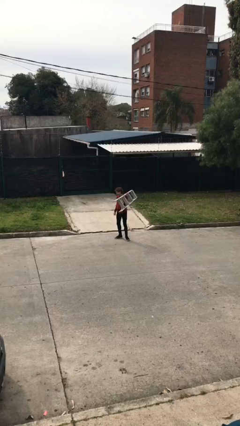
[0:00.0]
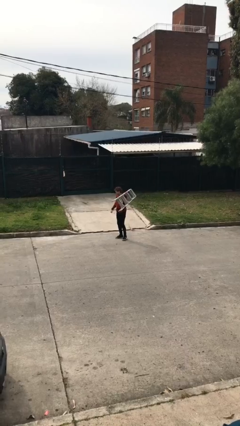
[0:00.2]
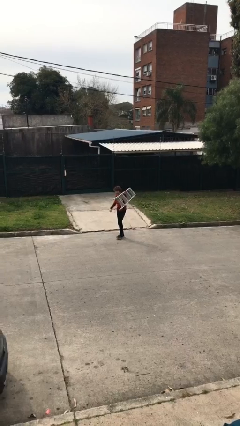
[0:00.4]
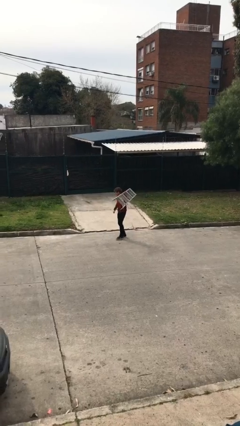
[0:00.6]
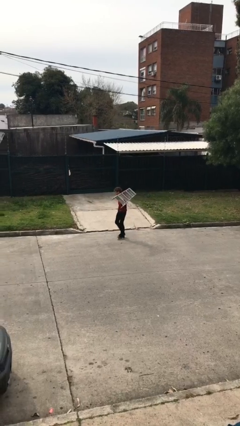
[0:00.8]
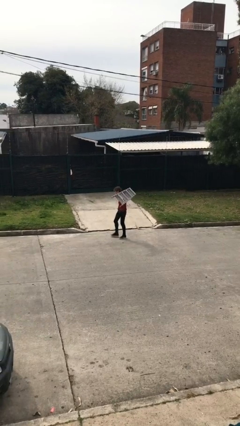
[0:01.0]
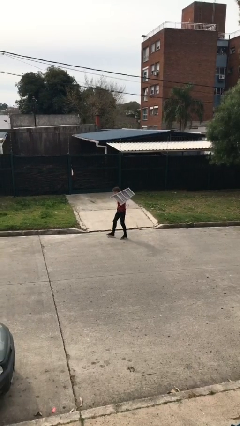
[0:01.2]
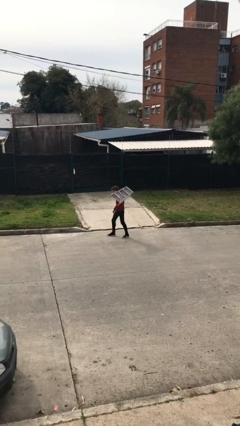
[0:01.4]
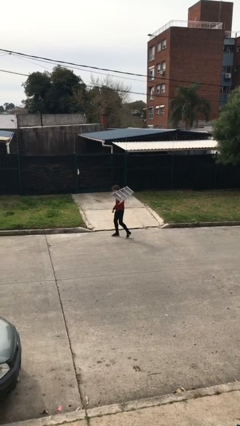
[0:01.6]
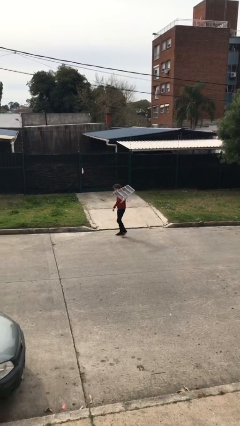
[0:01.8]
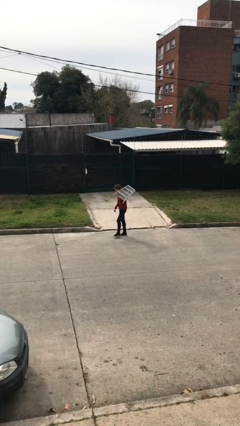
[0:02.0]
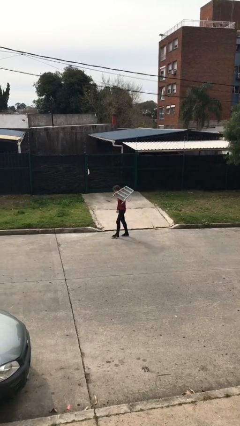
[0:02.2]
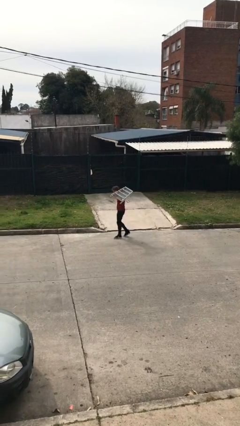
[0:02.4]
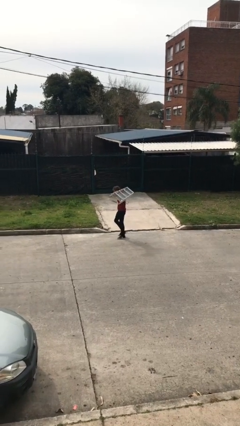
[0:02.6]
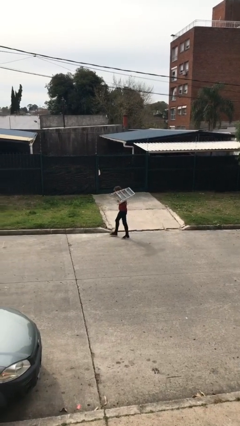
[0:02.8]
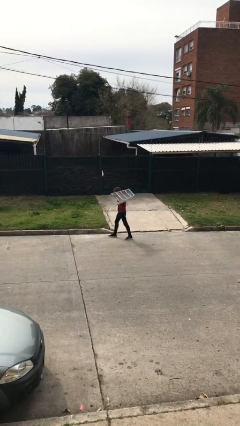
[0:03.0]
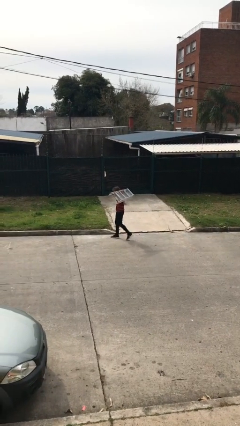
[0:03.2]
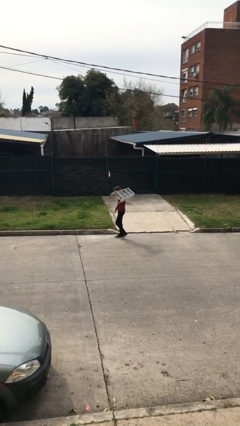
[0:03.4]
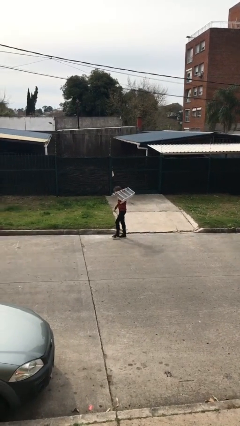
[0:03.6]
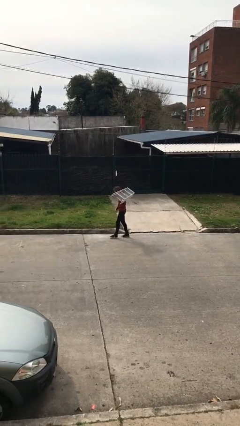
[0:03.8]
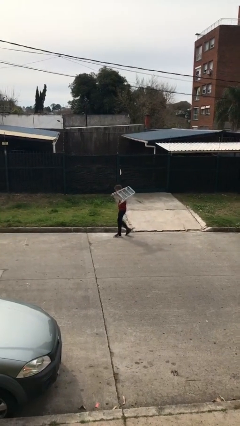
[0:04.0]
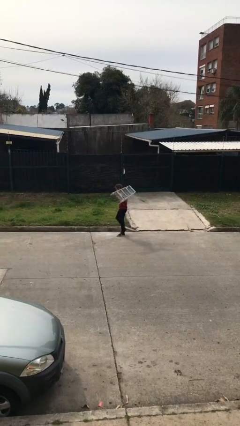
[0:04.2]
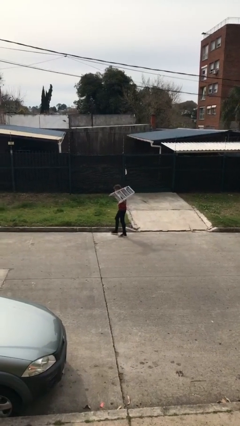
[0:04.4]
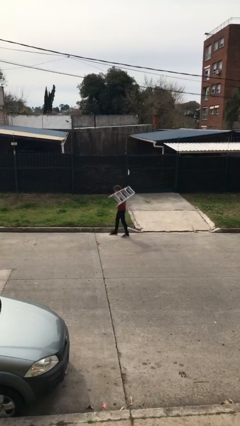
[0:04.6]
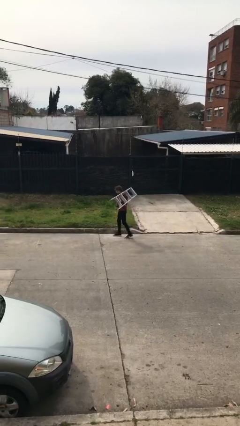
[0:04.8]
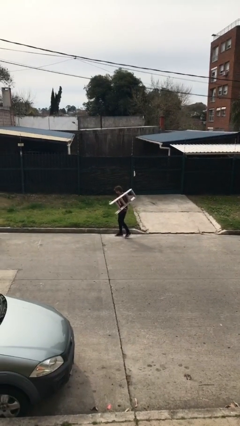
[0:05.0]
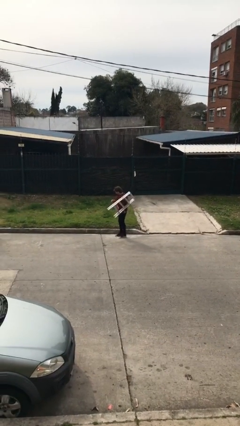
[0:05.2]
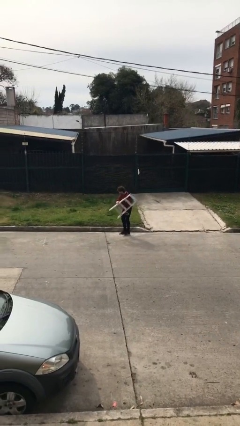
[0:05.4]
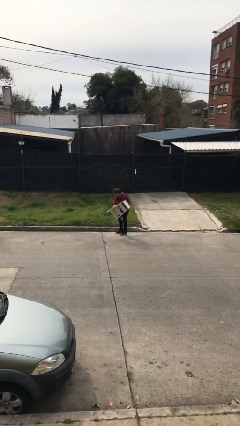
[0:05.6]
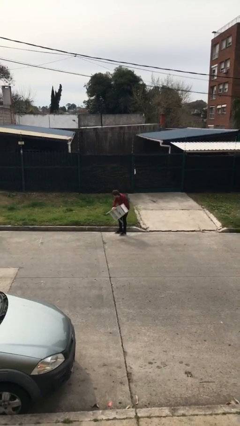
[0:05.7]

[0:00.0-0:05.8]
person carries heavy object

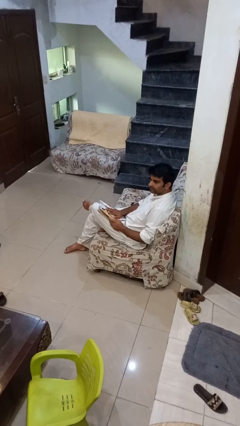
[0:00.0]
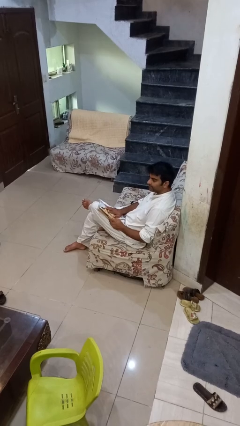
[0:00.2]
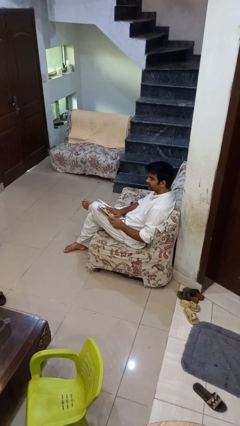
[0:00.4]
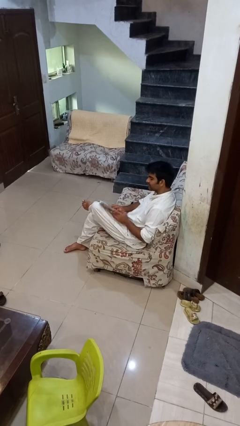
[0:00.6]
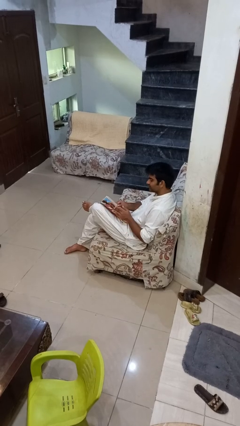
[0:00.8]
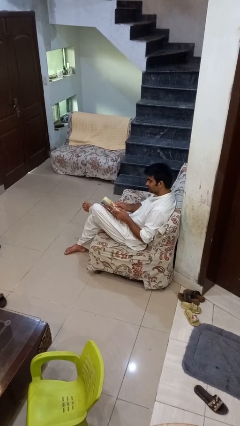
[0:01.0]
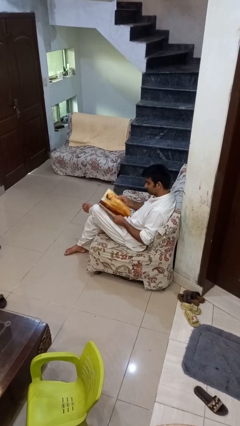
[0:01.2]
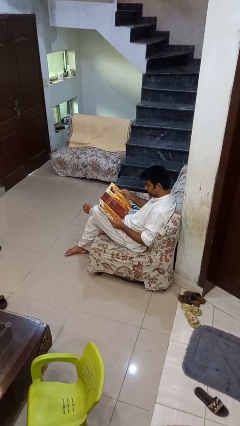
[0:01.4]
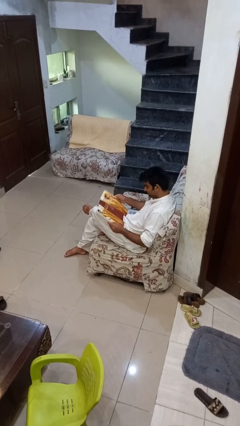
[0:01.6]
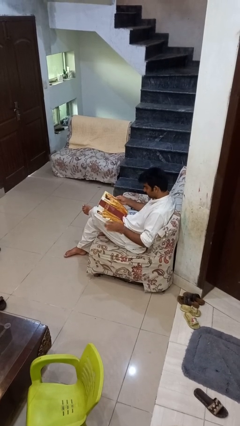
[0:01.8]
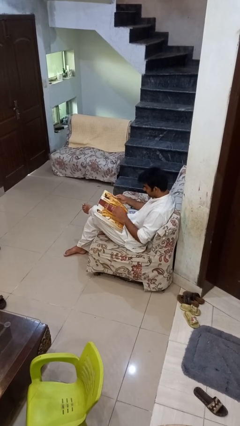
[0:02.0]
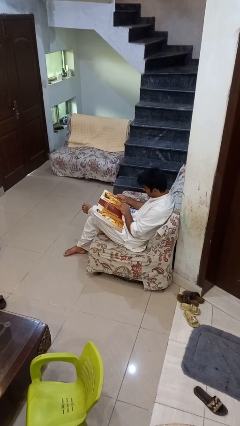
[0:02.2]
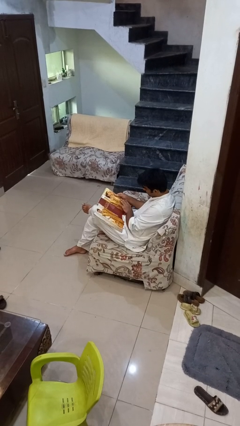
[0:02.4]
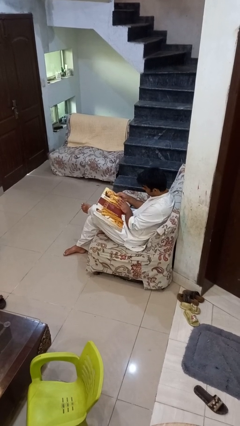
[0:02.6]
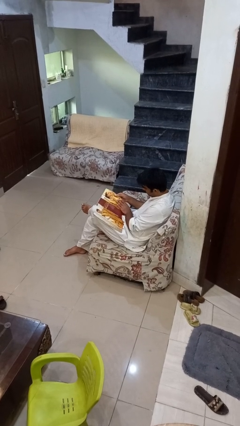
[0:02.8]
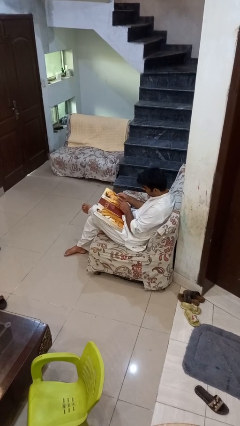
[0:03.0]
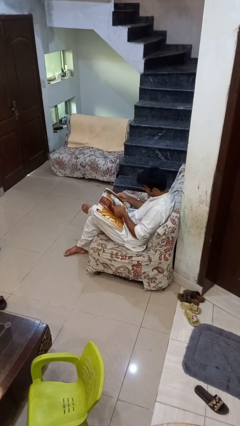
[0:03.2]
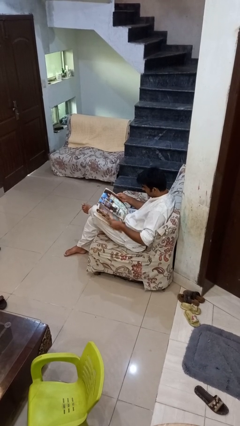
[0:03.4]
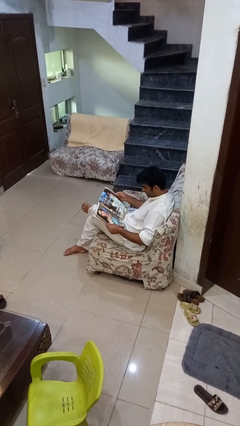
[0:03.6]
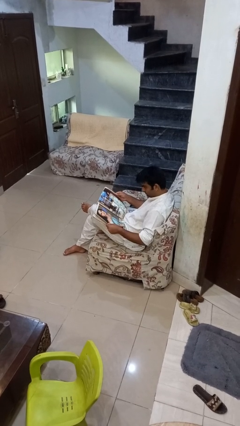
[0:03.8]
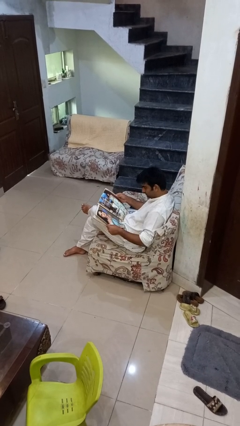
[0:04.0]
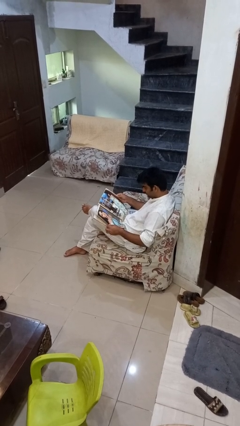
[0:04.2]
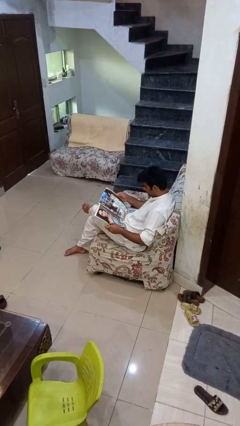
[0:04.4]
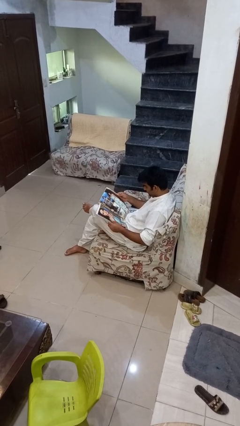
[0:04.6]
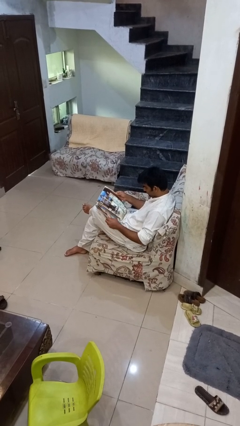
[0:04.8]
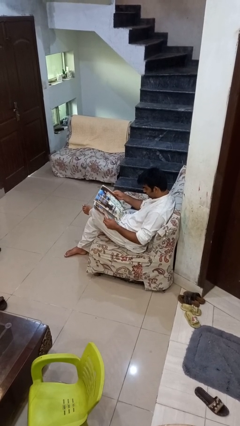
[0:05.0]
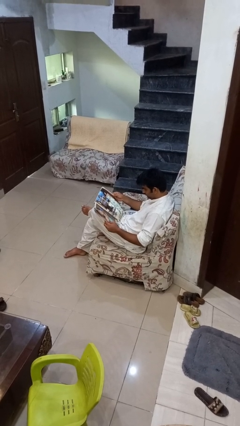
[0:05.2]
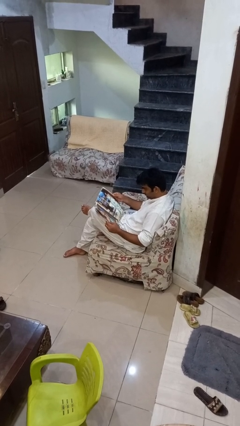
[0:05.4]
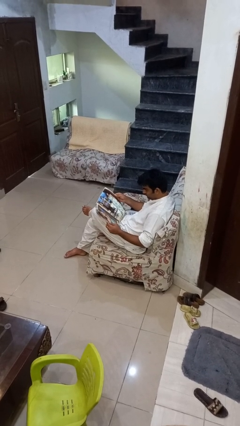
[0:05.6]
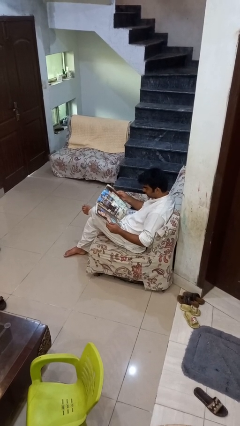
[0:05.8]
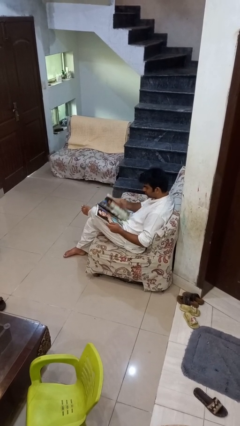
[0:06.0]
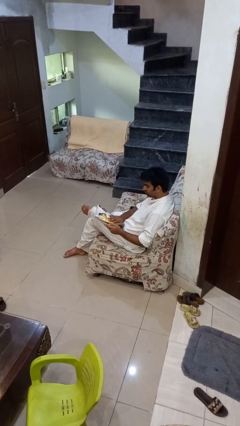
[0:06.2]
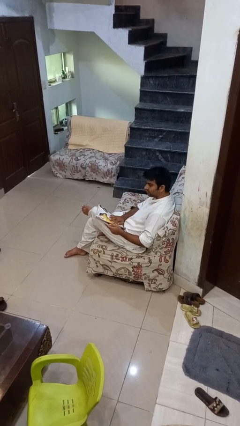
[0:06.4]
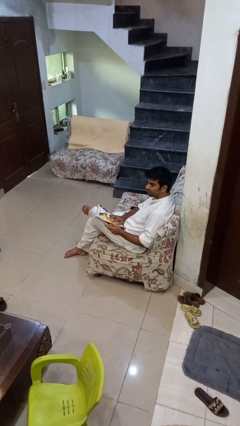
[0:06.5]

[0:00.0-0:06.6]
person reads magazine

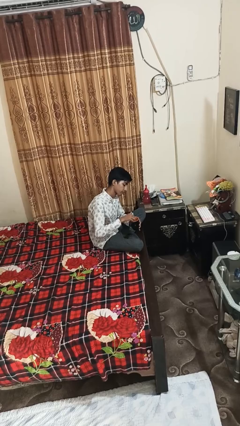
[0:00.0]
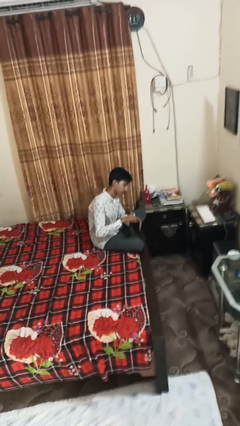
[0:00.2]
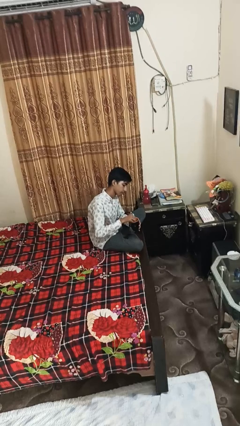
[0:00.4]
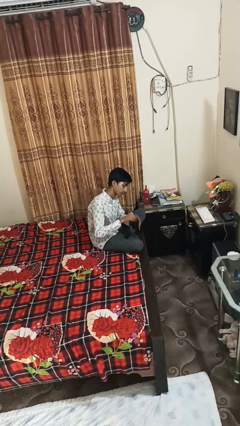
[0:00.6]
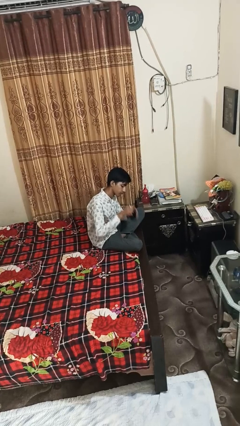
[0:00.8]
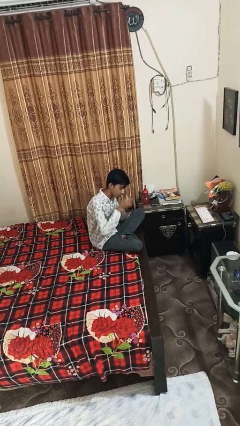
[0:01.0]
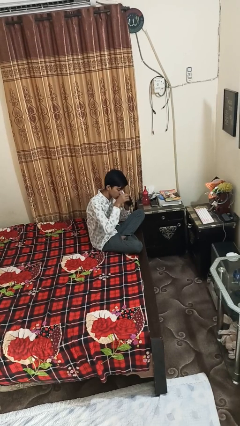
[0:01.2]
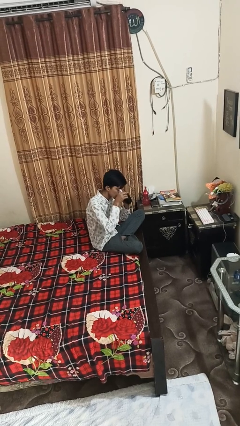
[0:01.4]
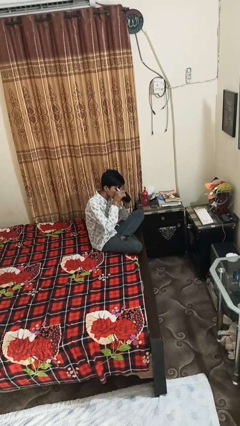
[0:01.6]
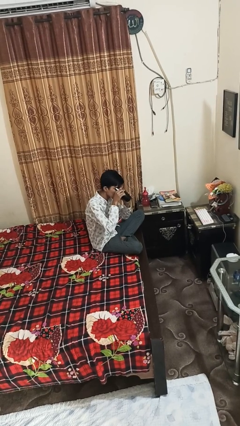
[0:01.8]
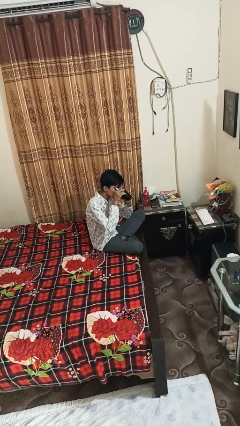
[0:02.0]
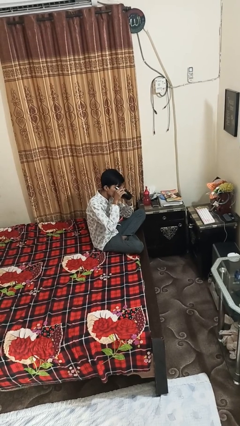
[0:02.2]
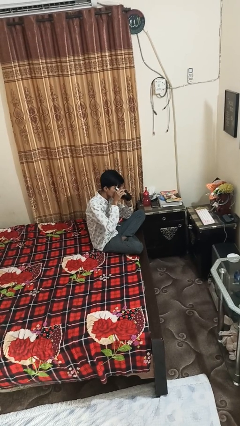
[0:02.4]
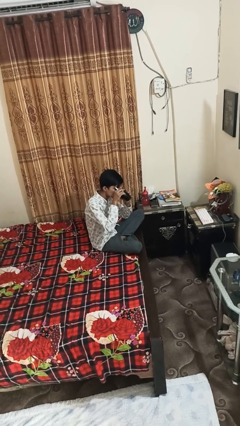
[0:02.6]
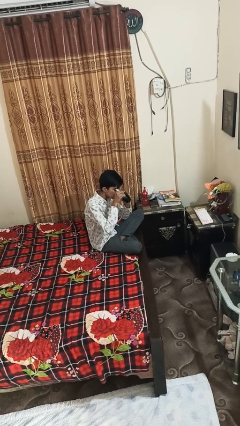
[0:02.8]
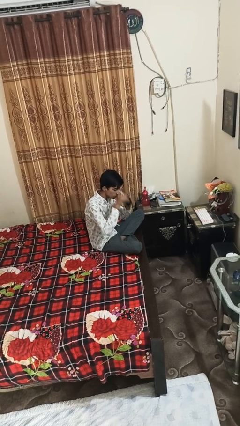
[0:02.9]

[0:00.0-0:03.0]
person drinks from mug

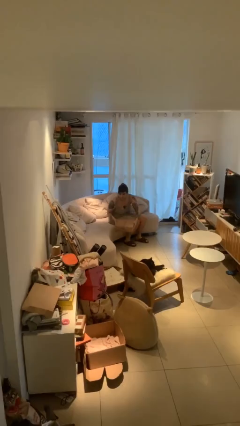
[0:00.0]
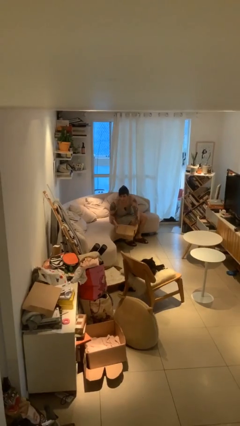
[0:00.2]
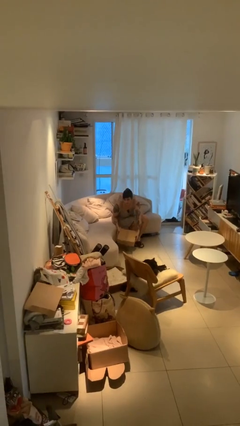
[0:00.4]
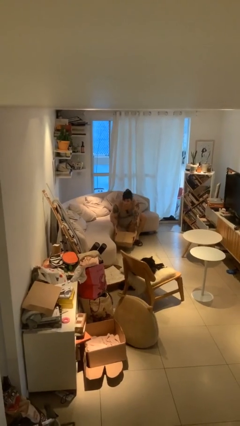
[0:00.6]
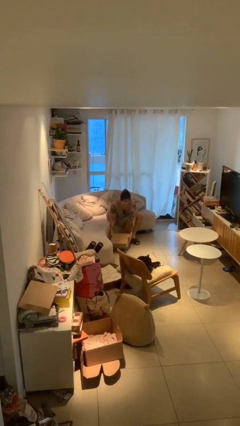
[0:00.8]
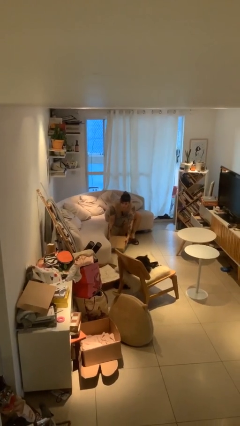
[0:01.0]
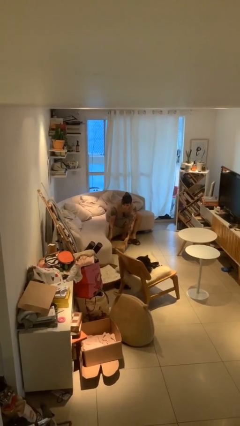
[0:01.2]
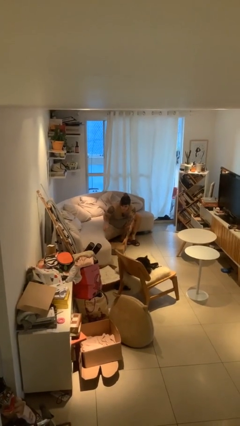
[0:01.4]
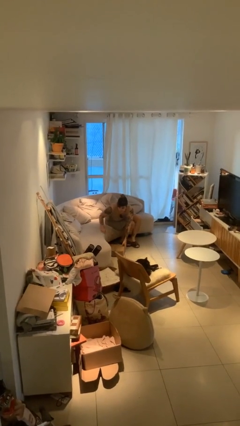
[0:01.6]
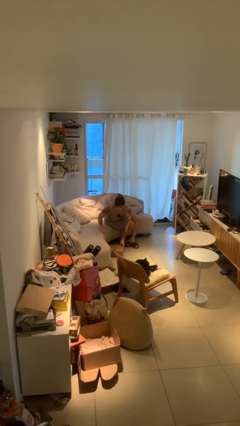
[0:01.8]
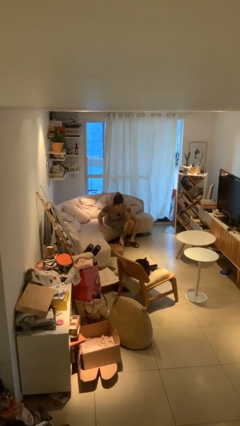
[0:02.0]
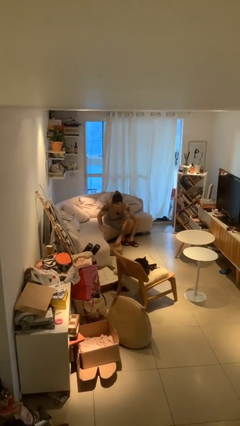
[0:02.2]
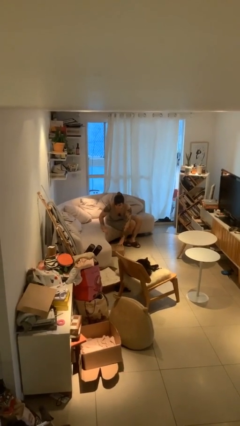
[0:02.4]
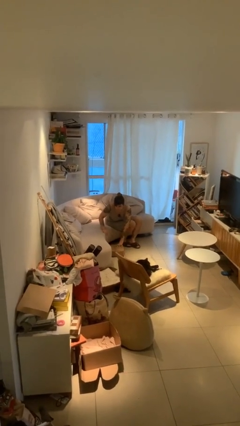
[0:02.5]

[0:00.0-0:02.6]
person puts down object on floor
